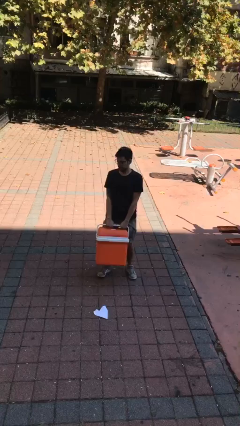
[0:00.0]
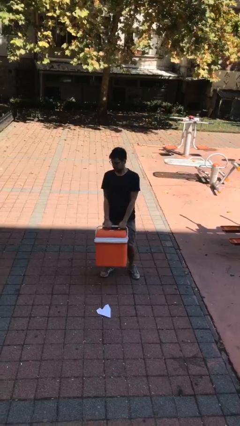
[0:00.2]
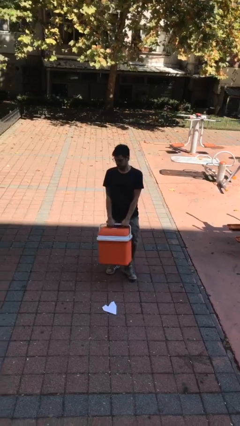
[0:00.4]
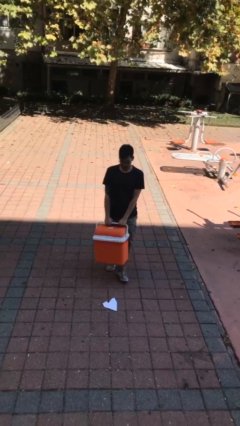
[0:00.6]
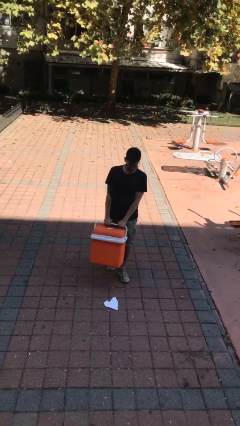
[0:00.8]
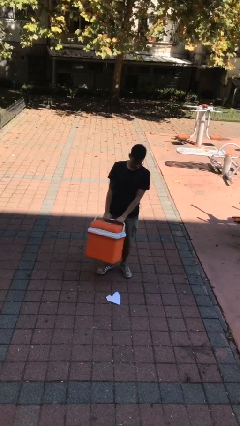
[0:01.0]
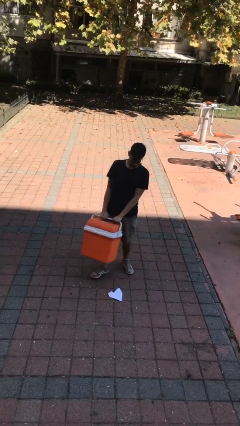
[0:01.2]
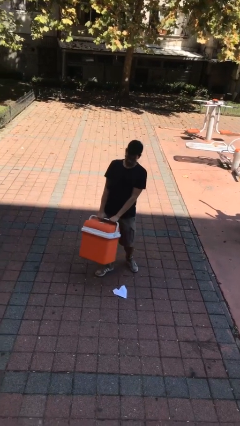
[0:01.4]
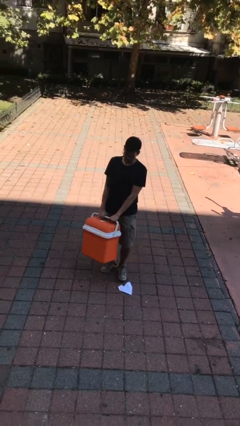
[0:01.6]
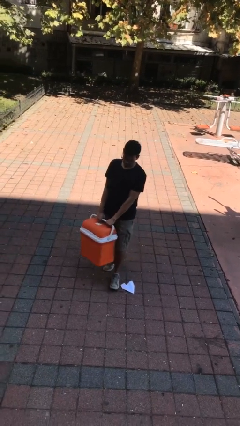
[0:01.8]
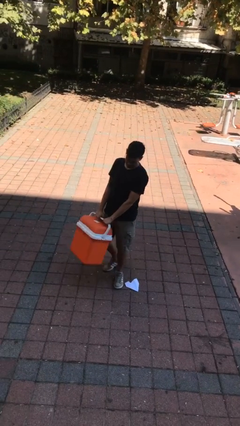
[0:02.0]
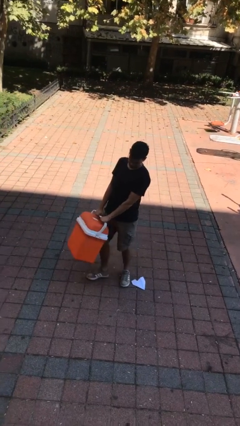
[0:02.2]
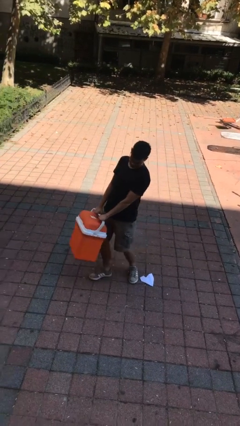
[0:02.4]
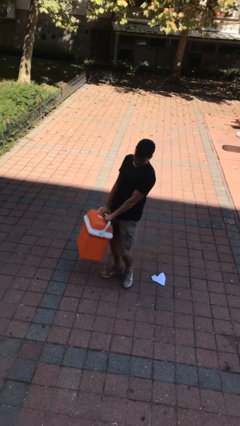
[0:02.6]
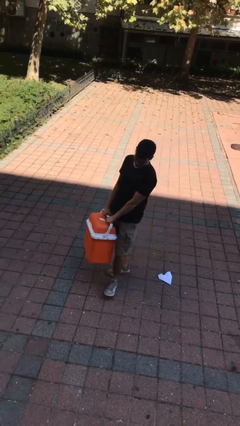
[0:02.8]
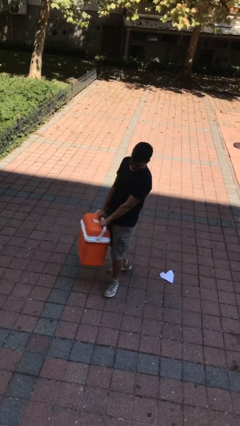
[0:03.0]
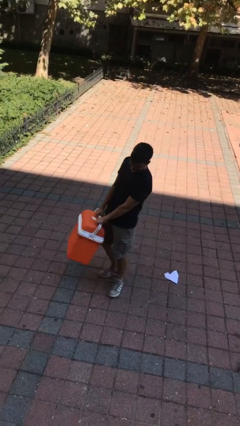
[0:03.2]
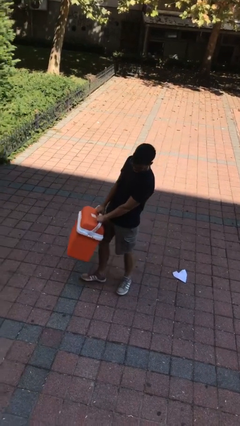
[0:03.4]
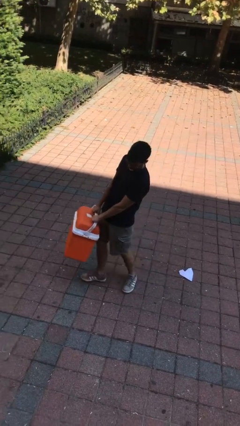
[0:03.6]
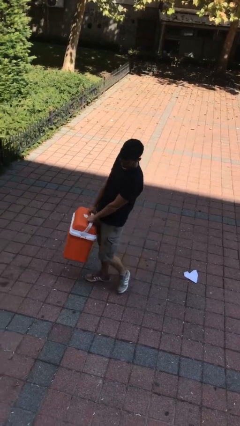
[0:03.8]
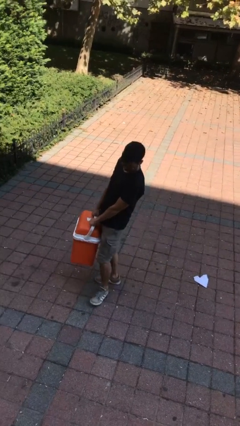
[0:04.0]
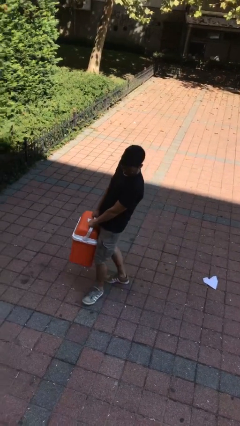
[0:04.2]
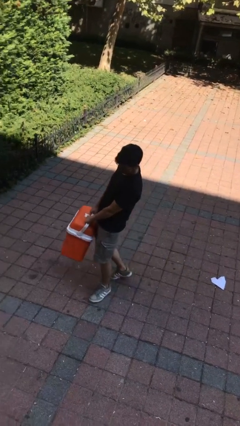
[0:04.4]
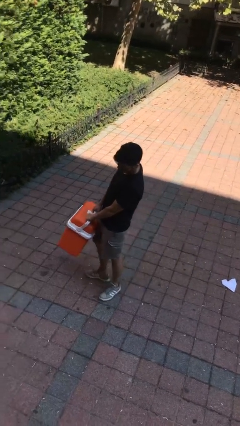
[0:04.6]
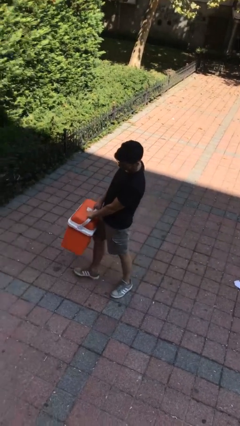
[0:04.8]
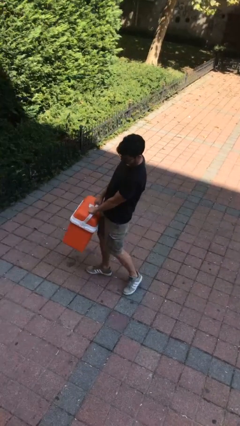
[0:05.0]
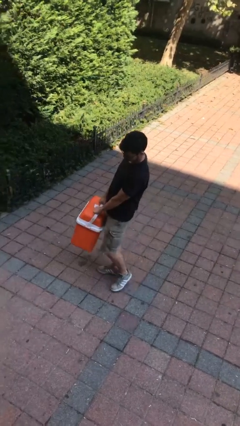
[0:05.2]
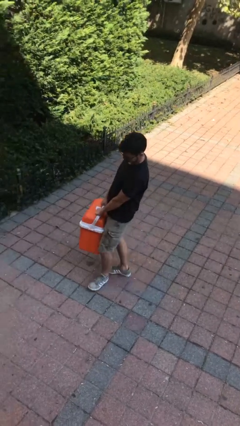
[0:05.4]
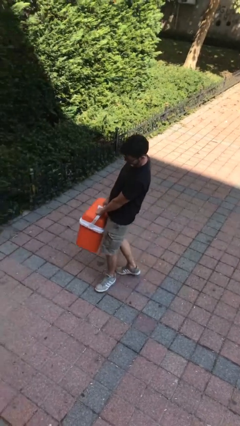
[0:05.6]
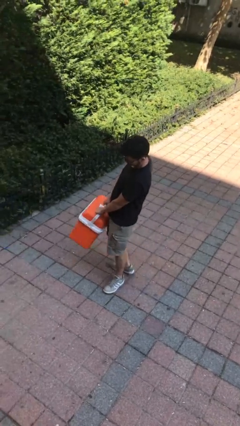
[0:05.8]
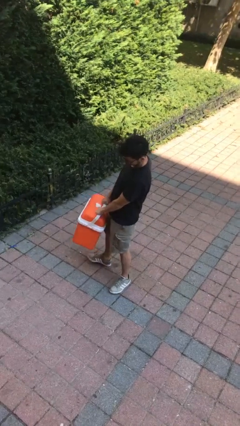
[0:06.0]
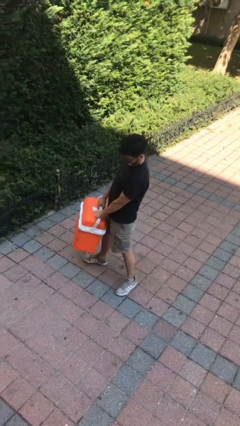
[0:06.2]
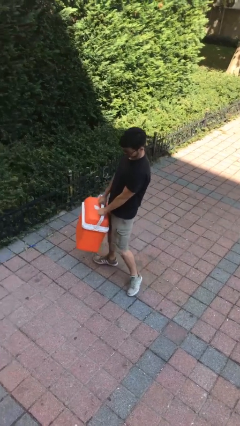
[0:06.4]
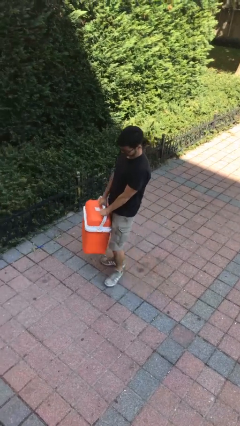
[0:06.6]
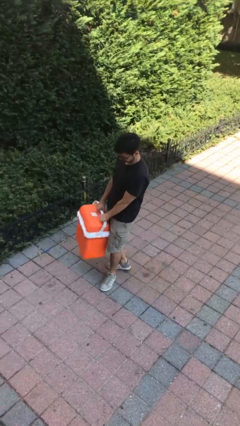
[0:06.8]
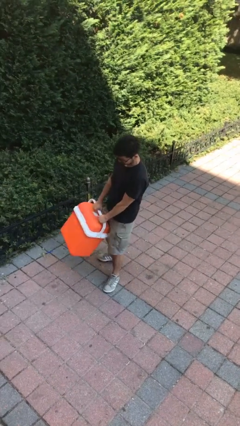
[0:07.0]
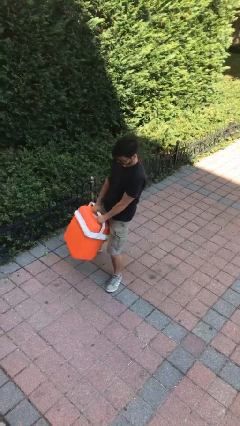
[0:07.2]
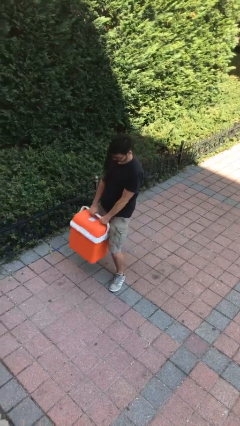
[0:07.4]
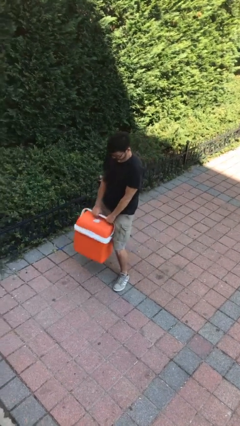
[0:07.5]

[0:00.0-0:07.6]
person carries heavy object

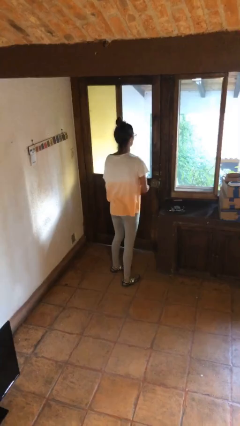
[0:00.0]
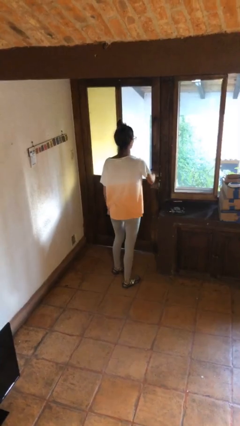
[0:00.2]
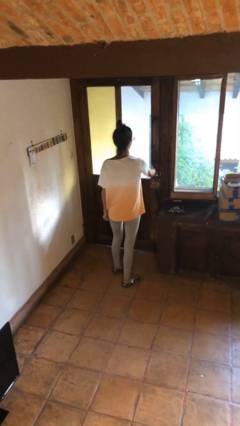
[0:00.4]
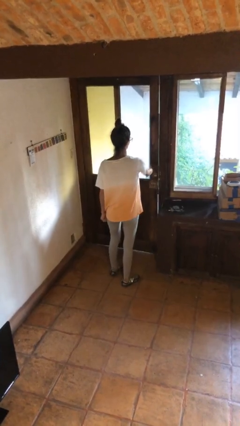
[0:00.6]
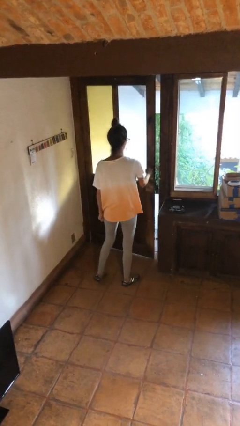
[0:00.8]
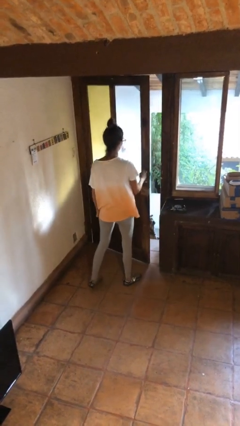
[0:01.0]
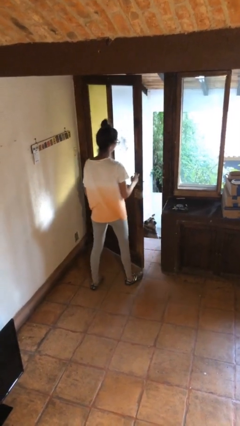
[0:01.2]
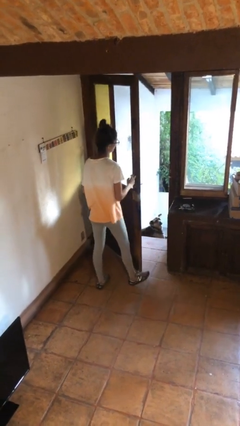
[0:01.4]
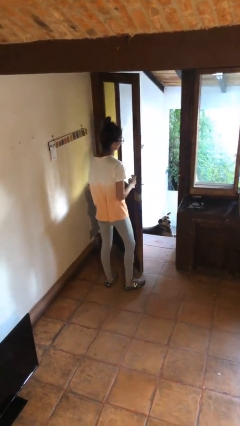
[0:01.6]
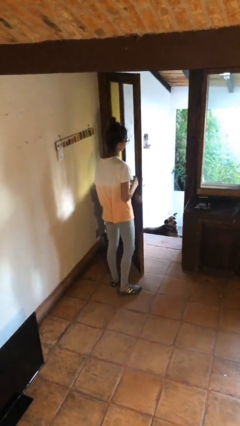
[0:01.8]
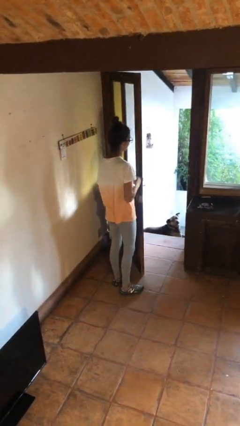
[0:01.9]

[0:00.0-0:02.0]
person opens facility door

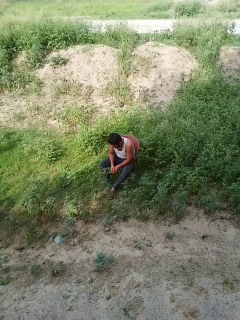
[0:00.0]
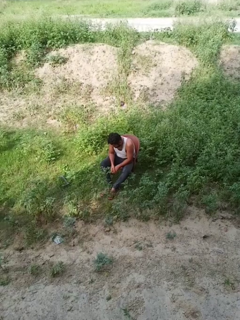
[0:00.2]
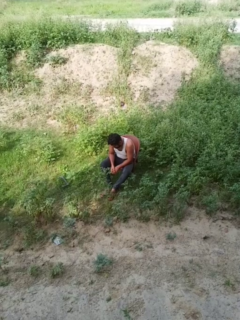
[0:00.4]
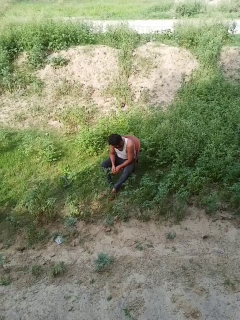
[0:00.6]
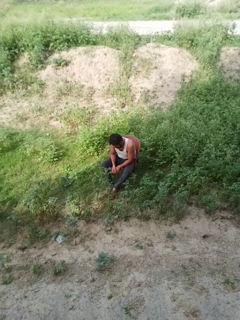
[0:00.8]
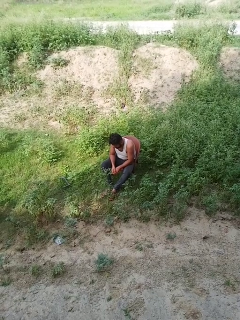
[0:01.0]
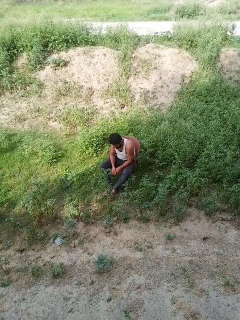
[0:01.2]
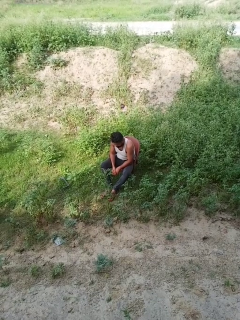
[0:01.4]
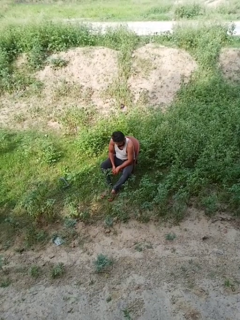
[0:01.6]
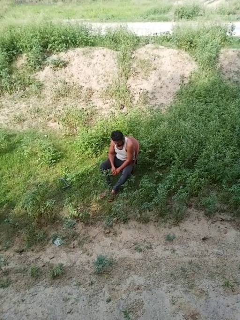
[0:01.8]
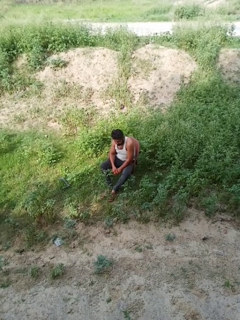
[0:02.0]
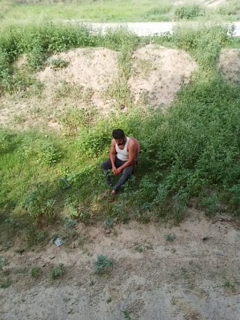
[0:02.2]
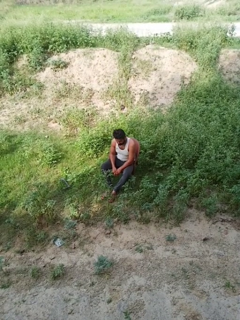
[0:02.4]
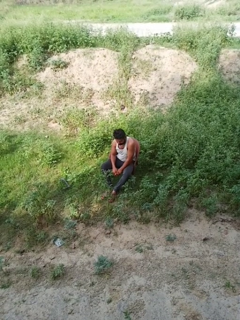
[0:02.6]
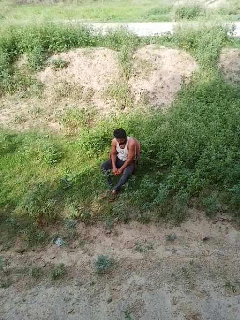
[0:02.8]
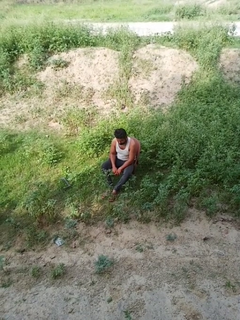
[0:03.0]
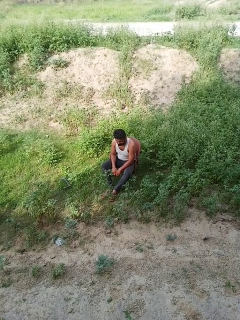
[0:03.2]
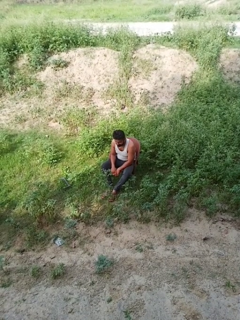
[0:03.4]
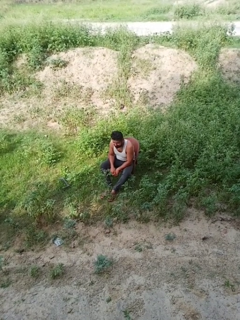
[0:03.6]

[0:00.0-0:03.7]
person shrugs

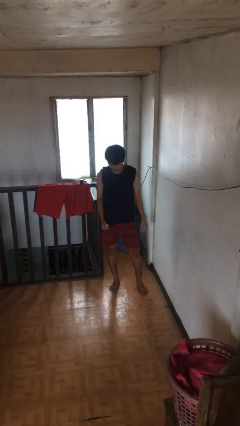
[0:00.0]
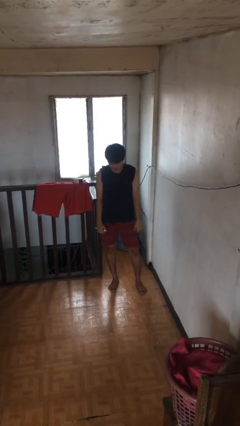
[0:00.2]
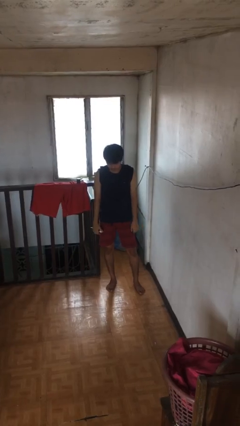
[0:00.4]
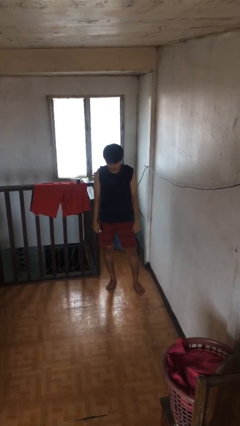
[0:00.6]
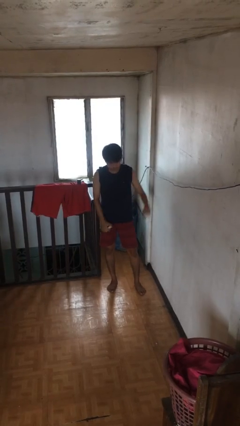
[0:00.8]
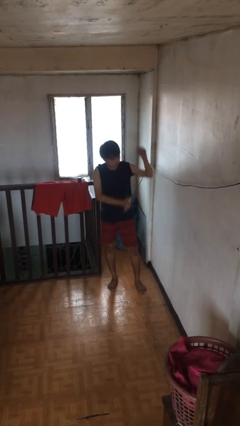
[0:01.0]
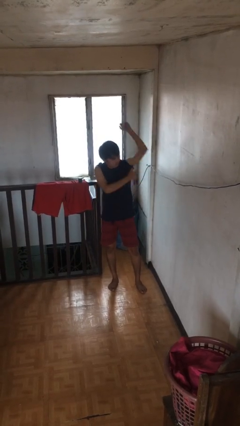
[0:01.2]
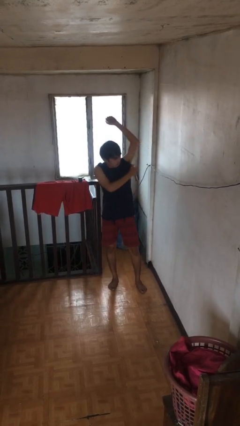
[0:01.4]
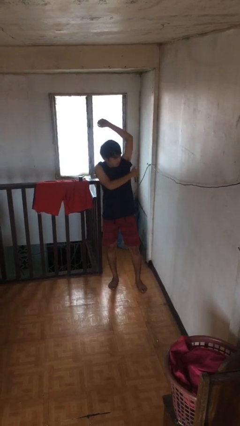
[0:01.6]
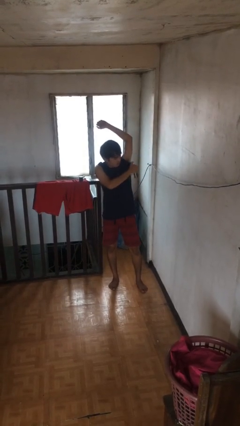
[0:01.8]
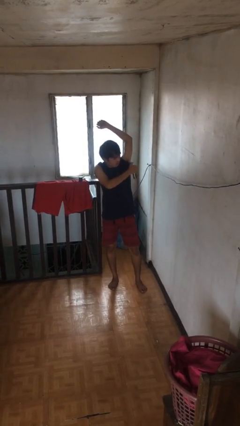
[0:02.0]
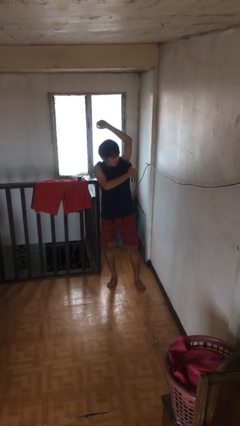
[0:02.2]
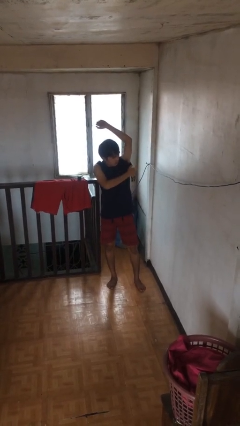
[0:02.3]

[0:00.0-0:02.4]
person applies deodorant

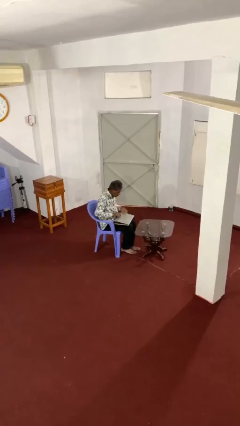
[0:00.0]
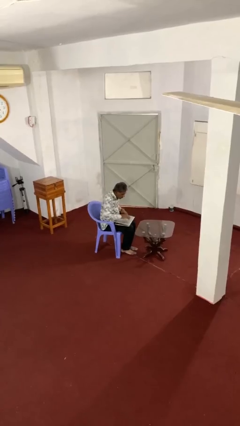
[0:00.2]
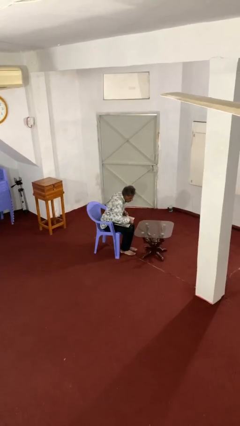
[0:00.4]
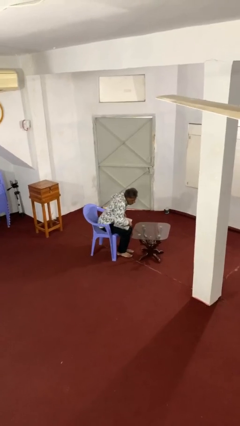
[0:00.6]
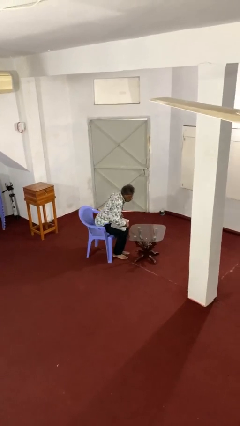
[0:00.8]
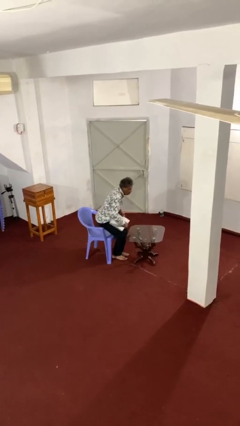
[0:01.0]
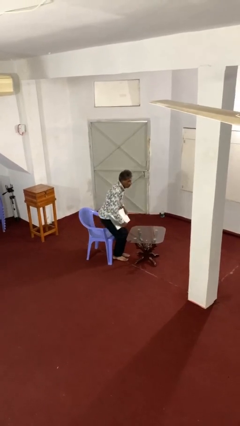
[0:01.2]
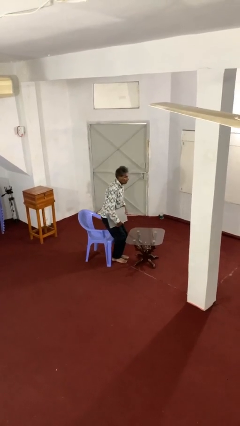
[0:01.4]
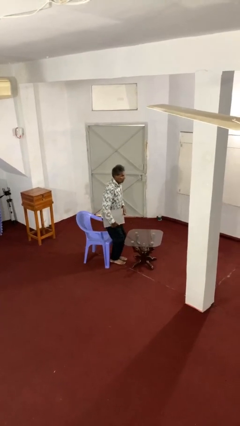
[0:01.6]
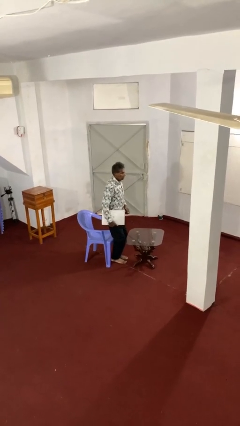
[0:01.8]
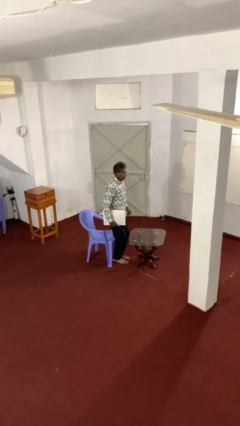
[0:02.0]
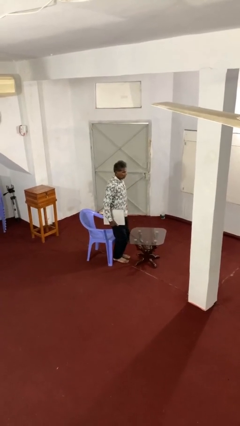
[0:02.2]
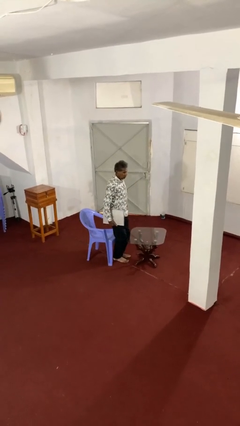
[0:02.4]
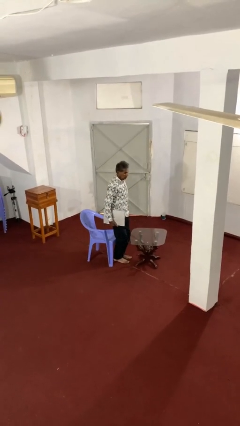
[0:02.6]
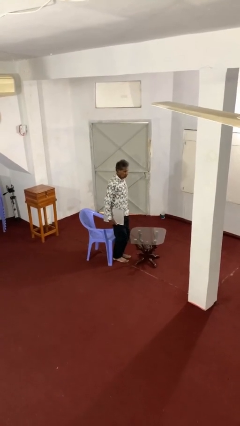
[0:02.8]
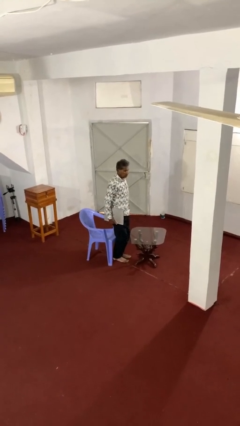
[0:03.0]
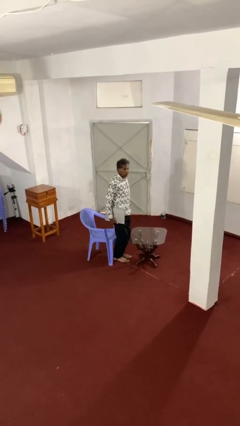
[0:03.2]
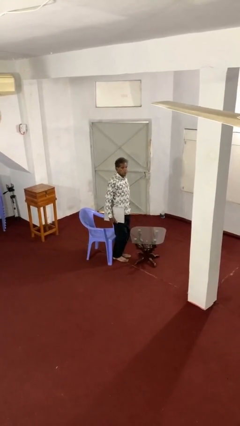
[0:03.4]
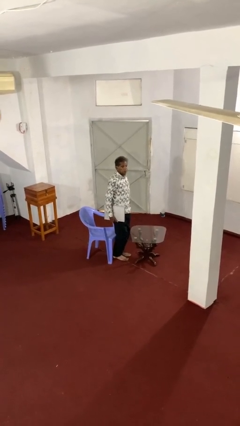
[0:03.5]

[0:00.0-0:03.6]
person stands up
